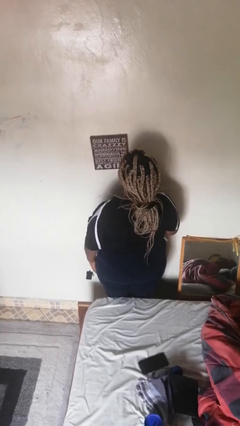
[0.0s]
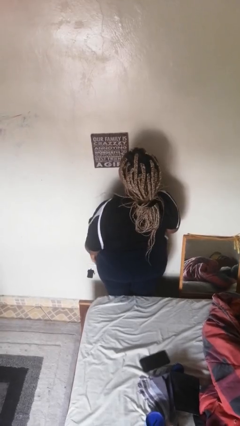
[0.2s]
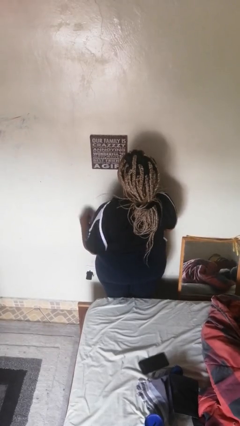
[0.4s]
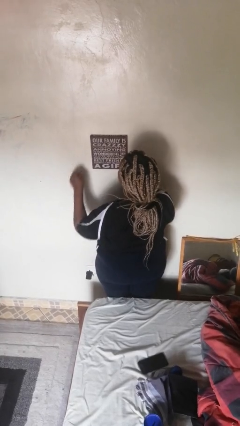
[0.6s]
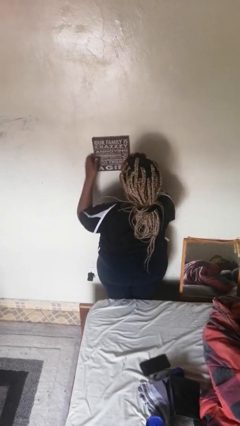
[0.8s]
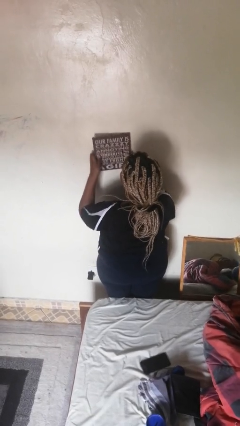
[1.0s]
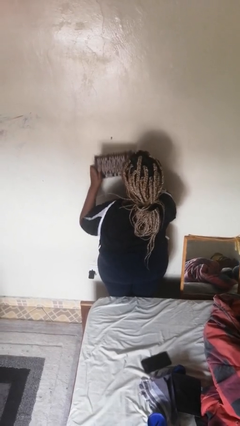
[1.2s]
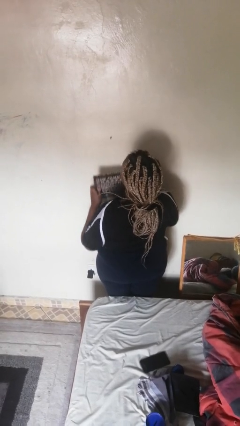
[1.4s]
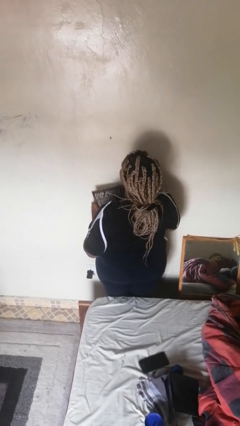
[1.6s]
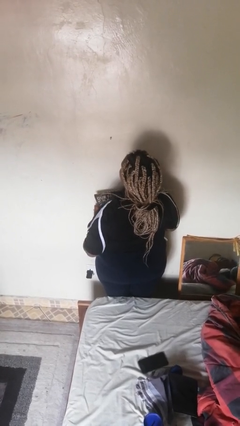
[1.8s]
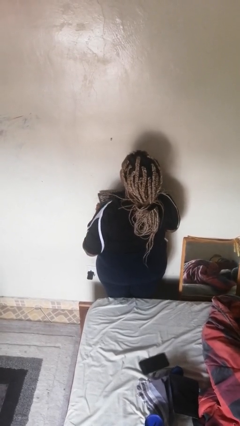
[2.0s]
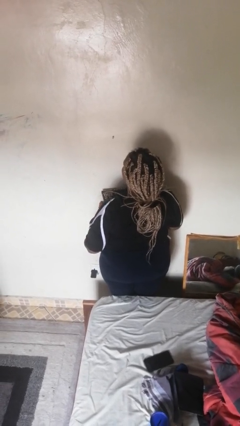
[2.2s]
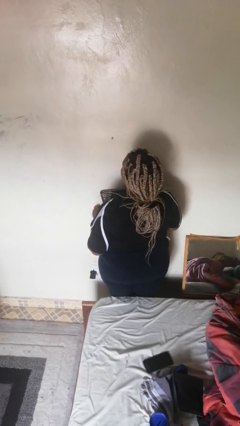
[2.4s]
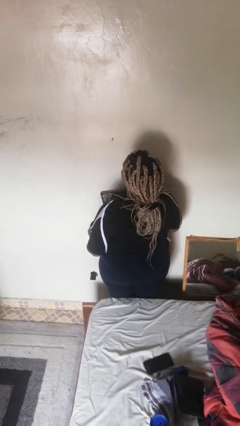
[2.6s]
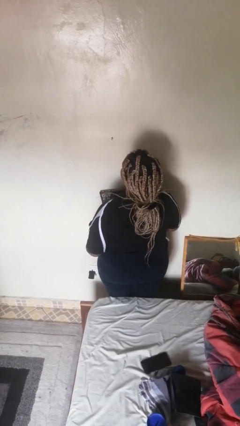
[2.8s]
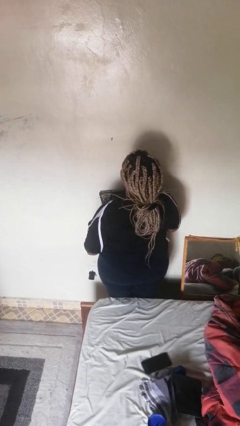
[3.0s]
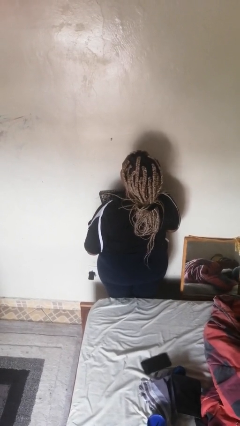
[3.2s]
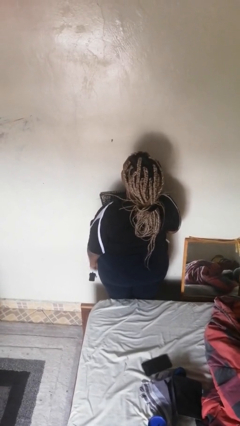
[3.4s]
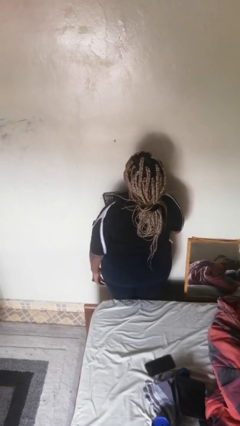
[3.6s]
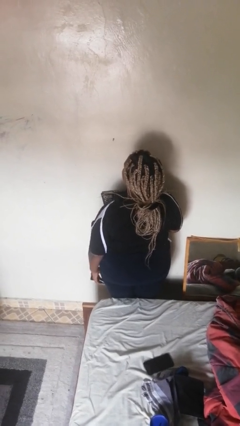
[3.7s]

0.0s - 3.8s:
person takes down picture frame

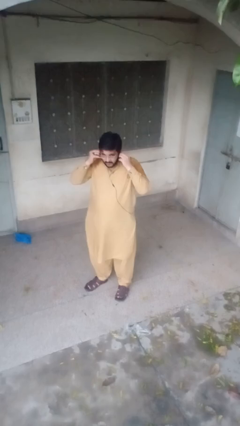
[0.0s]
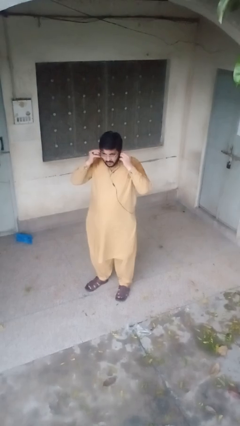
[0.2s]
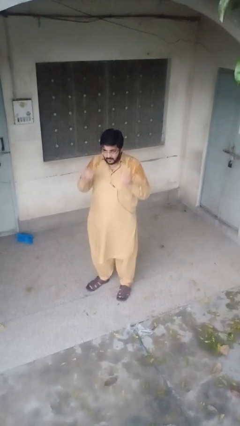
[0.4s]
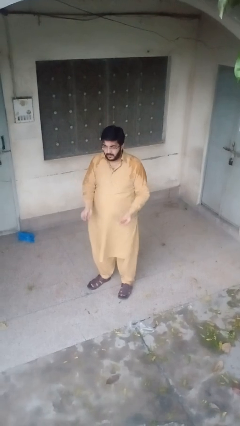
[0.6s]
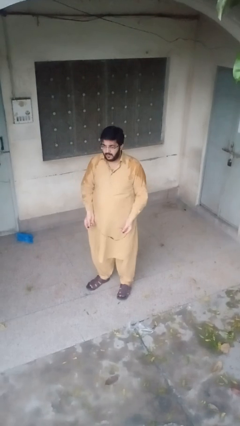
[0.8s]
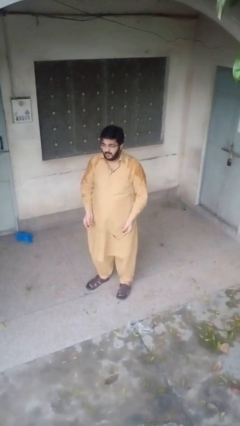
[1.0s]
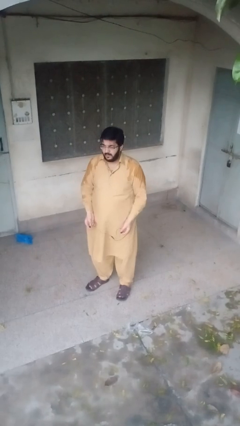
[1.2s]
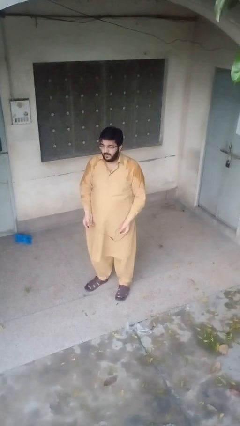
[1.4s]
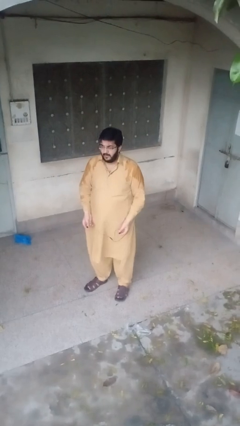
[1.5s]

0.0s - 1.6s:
person takes off headphones

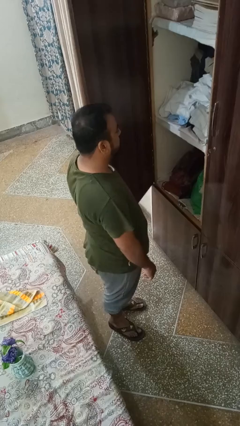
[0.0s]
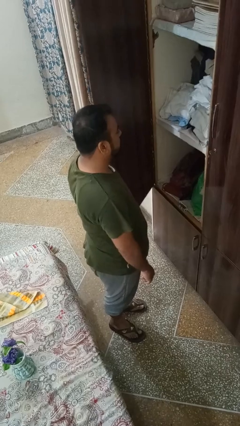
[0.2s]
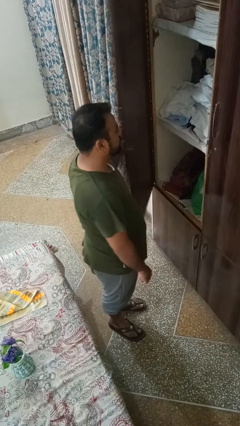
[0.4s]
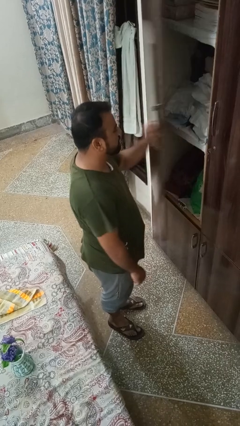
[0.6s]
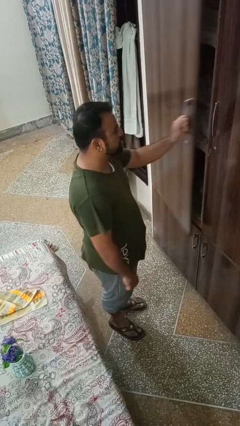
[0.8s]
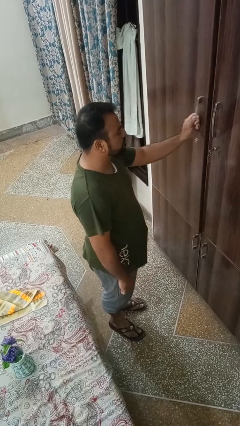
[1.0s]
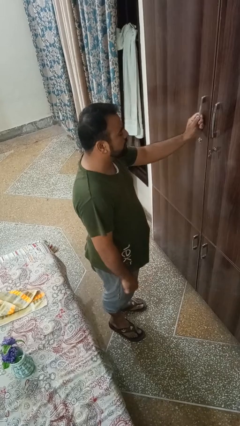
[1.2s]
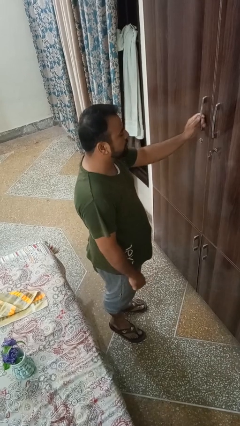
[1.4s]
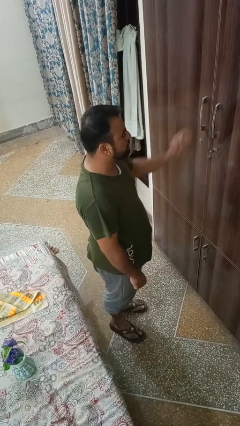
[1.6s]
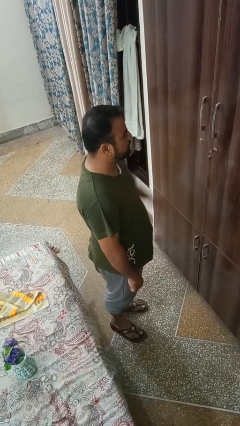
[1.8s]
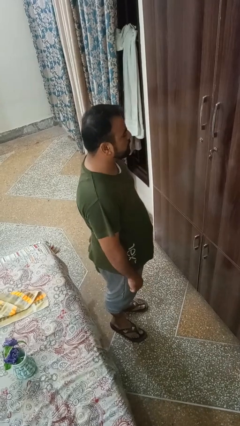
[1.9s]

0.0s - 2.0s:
person closes closet door

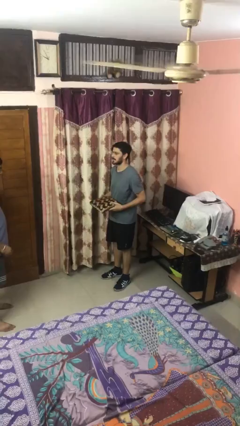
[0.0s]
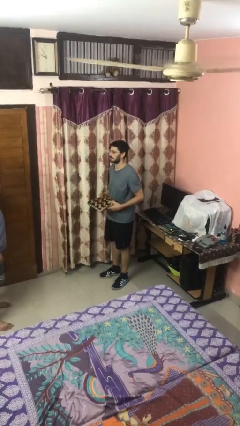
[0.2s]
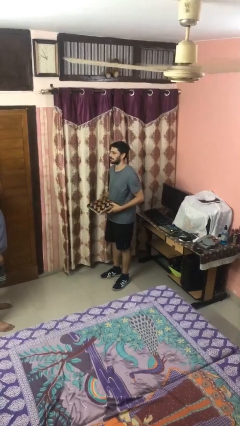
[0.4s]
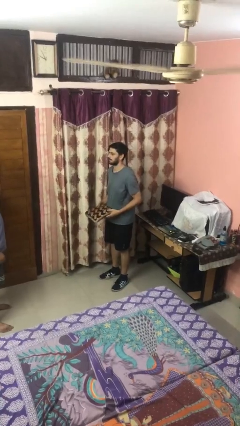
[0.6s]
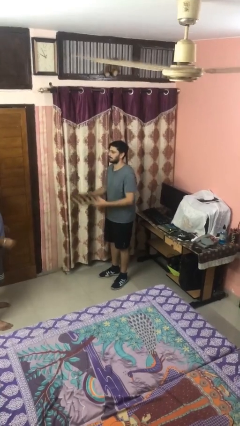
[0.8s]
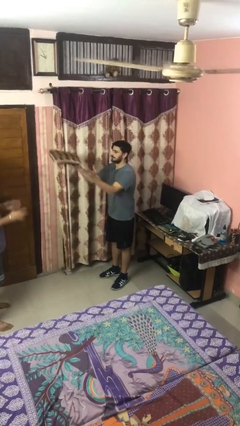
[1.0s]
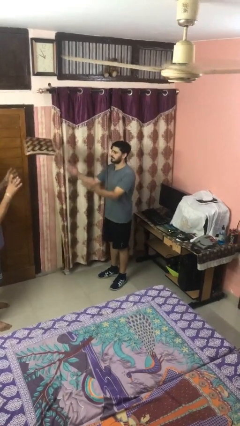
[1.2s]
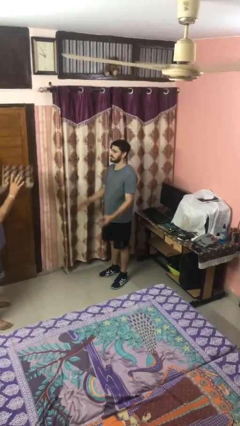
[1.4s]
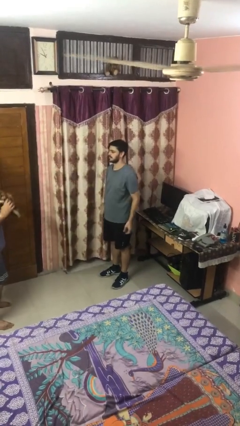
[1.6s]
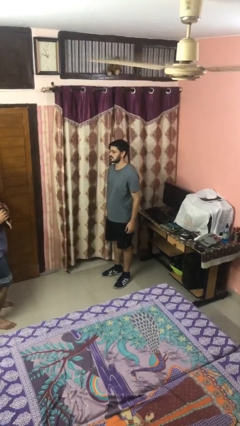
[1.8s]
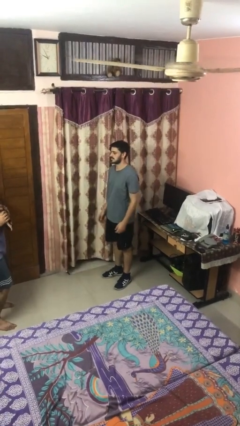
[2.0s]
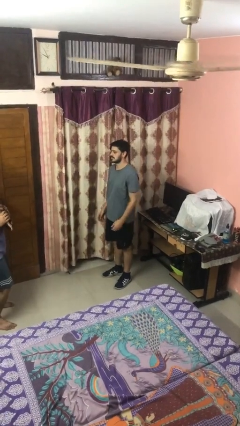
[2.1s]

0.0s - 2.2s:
person throws object to person

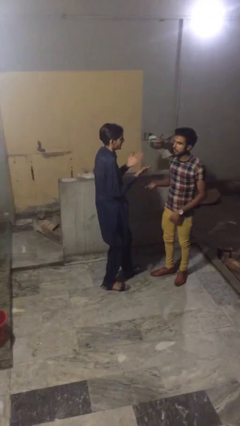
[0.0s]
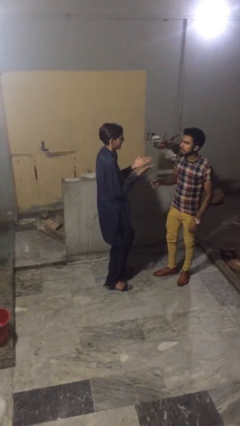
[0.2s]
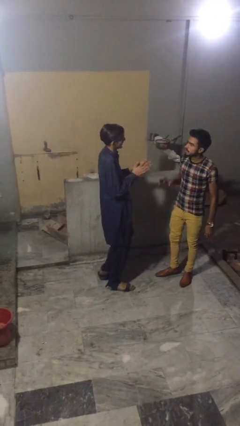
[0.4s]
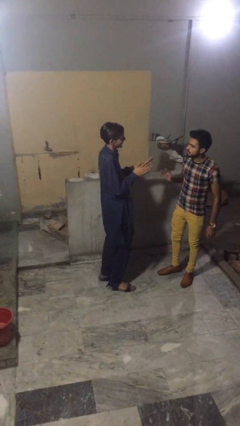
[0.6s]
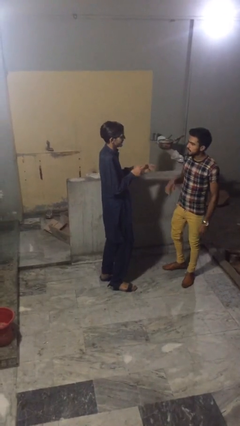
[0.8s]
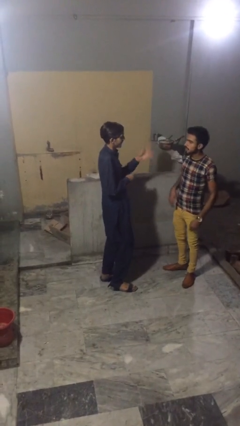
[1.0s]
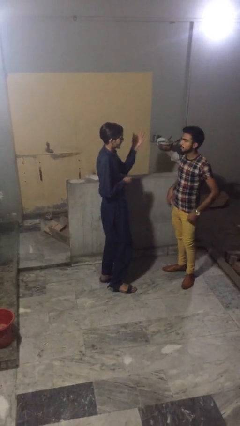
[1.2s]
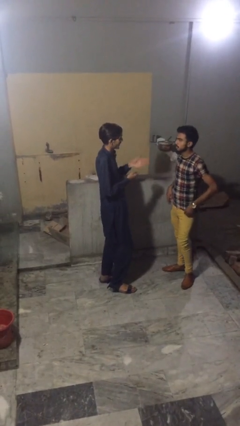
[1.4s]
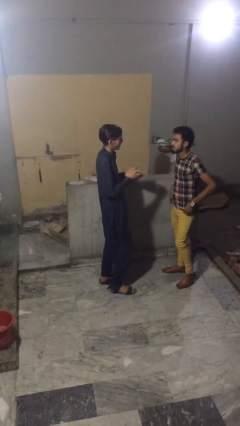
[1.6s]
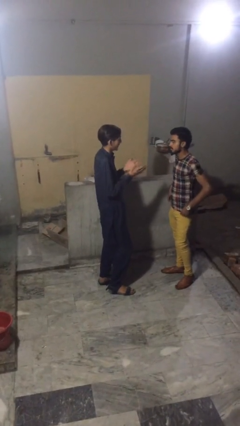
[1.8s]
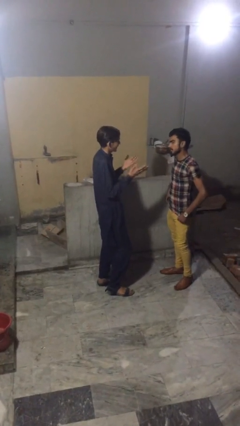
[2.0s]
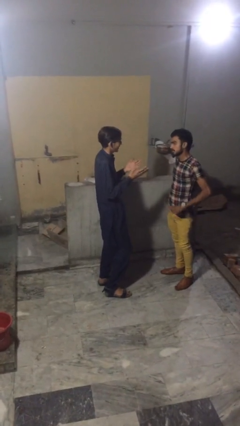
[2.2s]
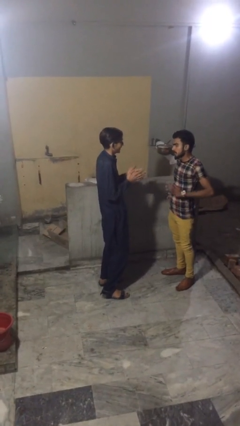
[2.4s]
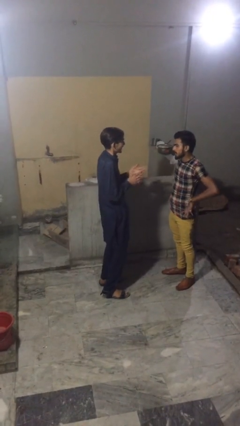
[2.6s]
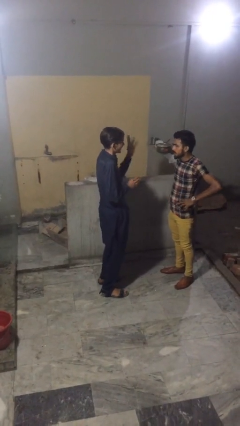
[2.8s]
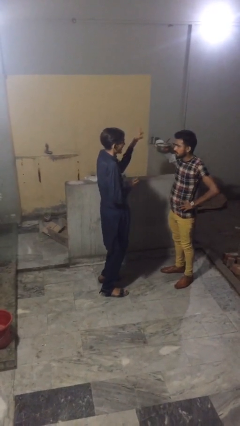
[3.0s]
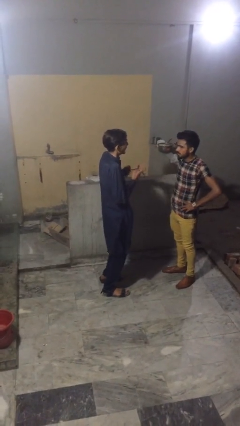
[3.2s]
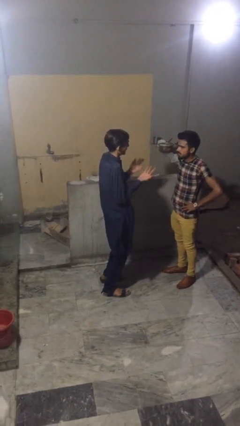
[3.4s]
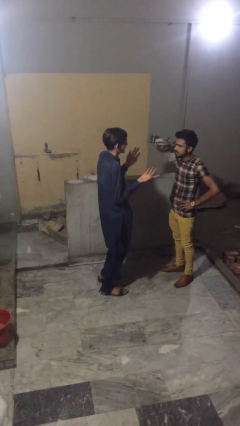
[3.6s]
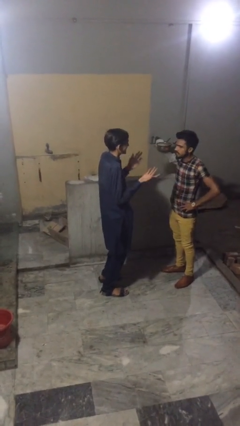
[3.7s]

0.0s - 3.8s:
person talks to person

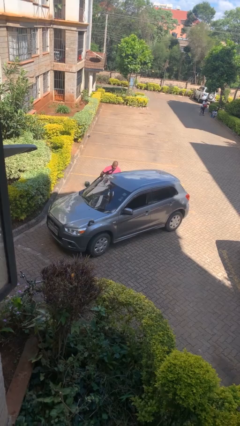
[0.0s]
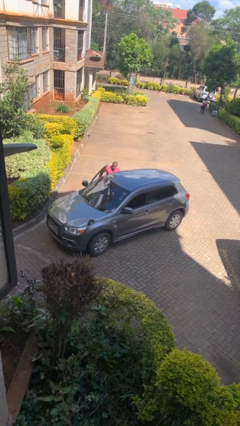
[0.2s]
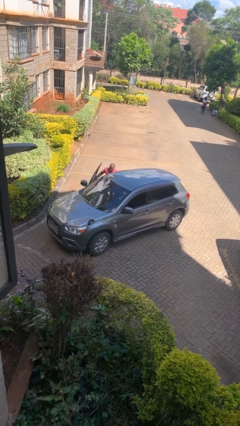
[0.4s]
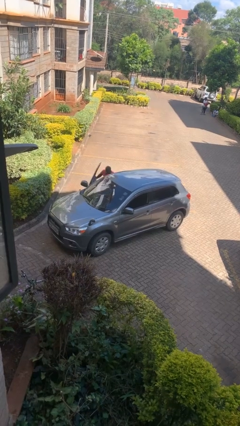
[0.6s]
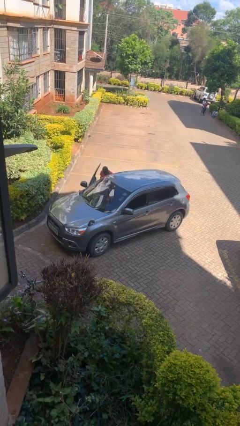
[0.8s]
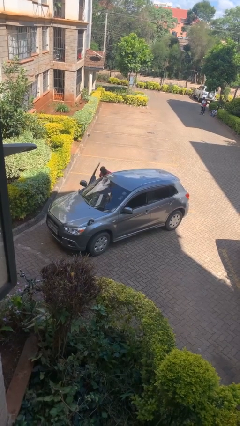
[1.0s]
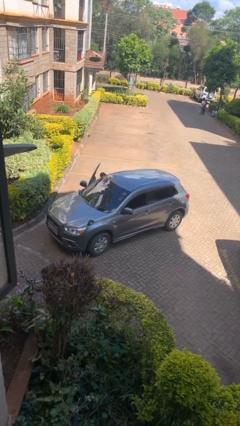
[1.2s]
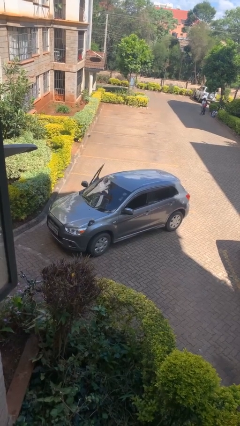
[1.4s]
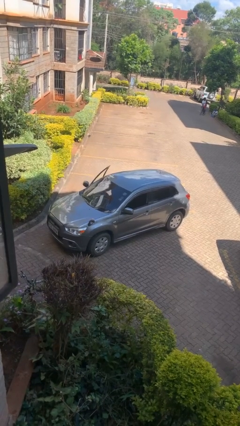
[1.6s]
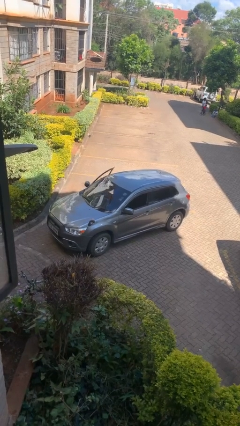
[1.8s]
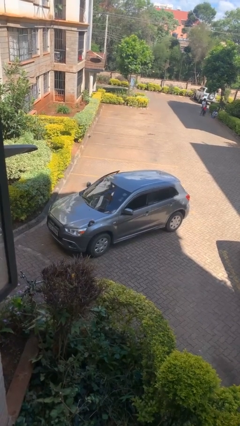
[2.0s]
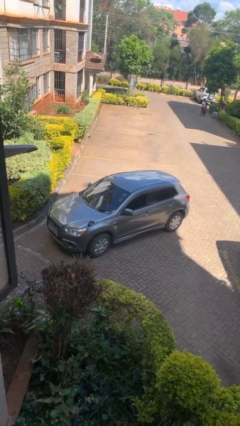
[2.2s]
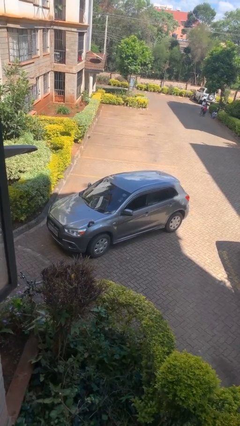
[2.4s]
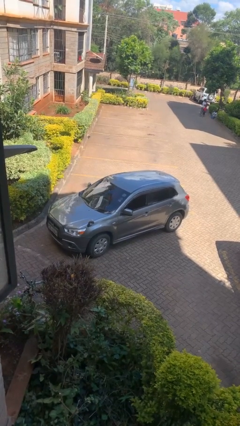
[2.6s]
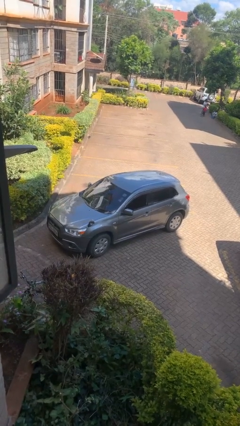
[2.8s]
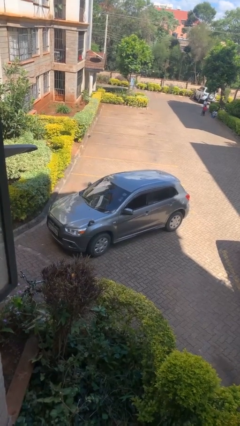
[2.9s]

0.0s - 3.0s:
car picks up person

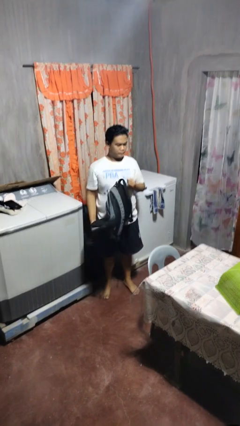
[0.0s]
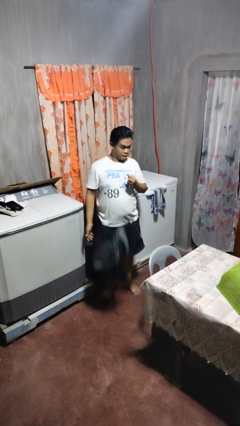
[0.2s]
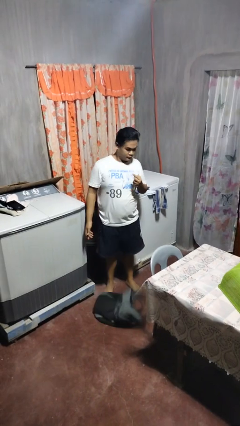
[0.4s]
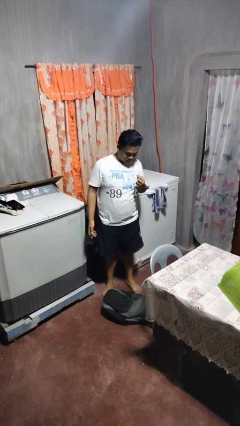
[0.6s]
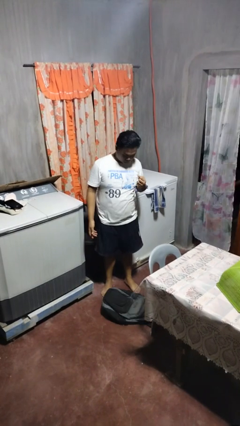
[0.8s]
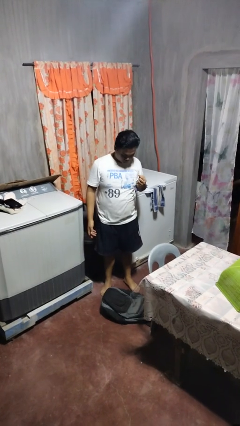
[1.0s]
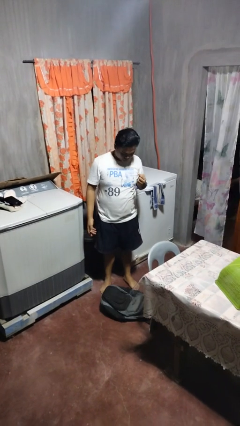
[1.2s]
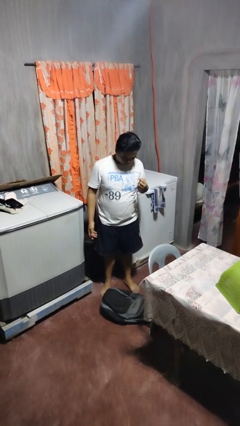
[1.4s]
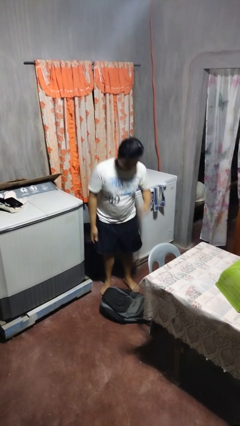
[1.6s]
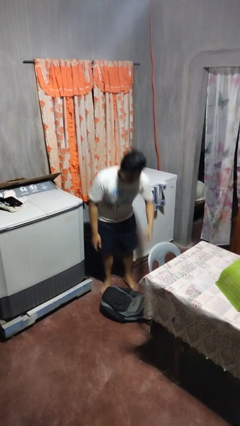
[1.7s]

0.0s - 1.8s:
person drops object
